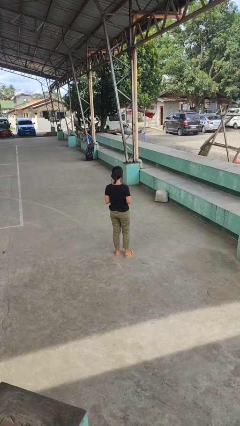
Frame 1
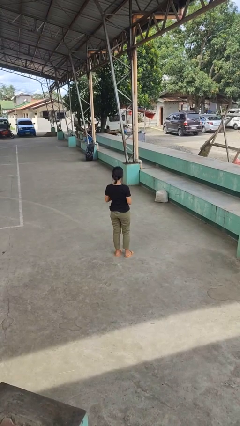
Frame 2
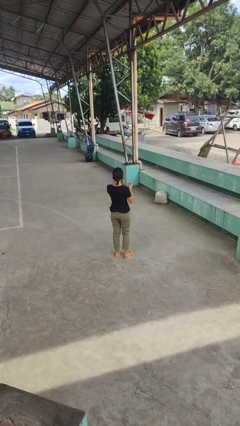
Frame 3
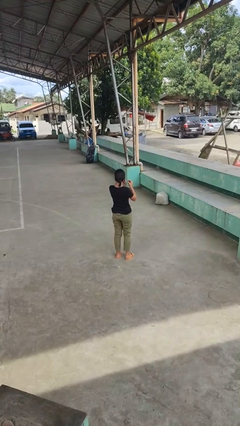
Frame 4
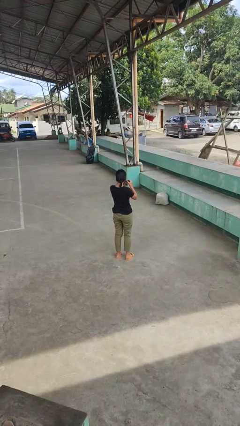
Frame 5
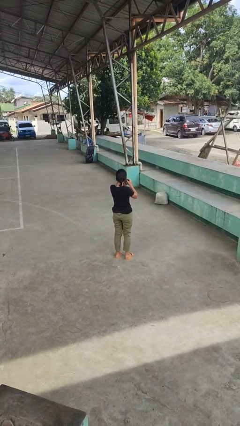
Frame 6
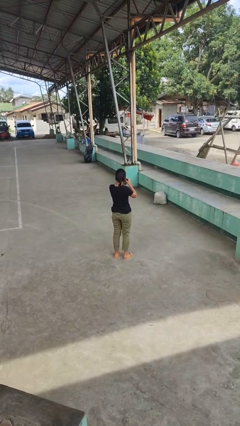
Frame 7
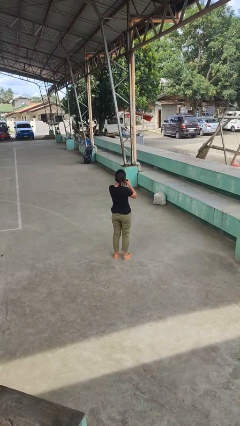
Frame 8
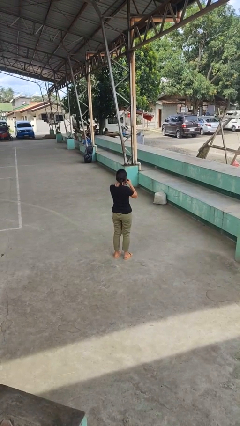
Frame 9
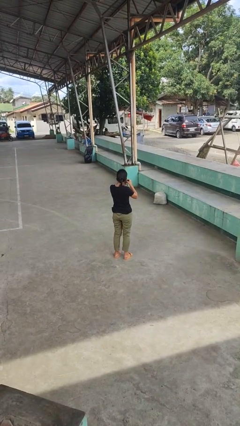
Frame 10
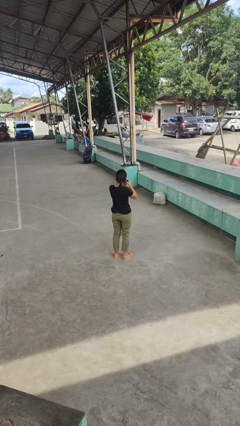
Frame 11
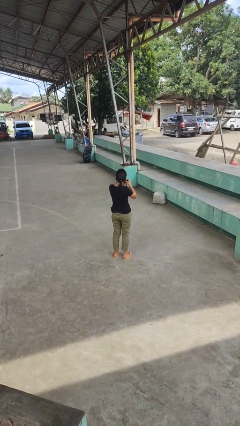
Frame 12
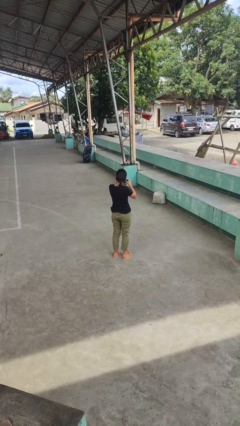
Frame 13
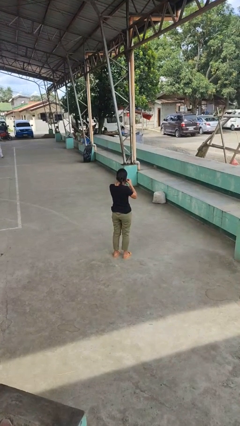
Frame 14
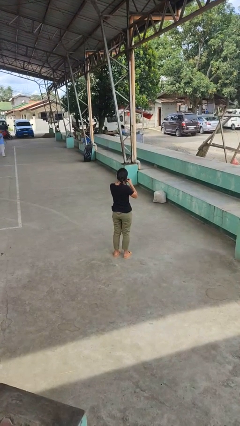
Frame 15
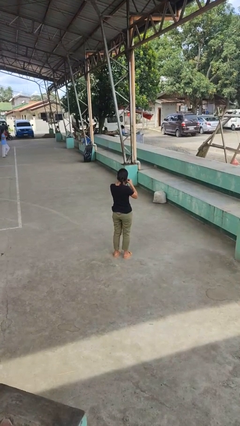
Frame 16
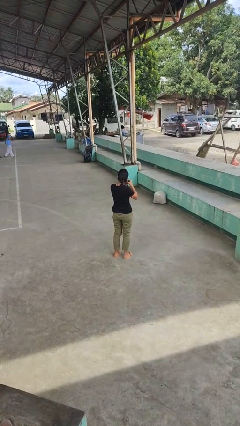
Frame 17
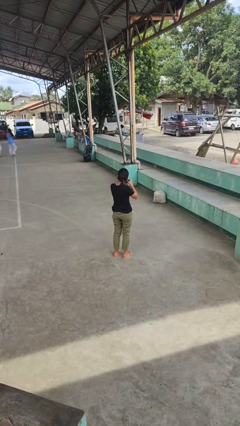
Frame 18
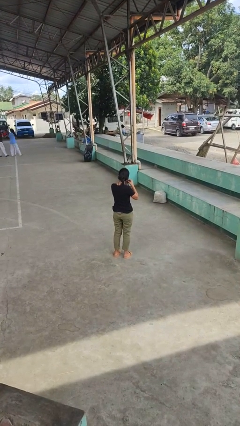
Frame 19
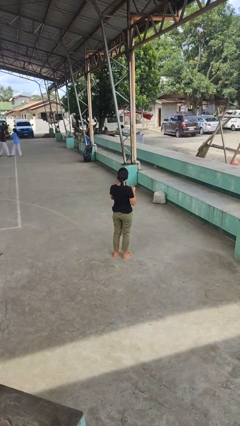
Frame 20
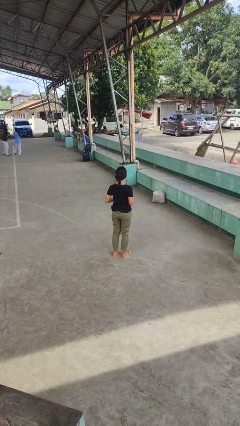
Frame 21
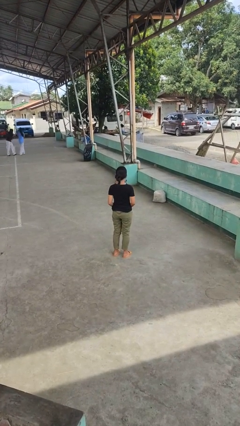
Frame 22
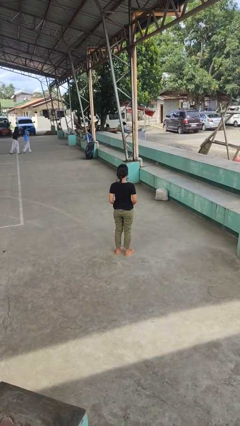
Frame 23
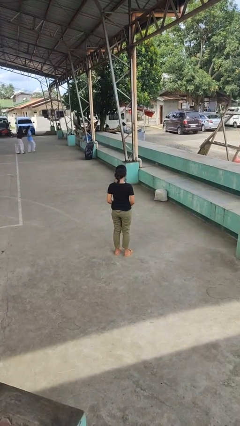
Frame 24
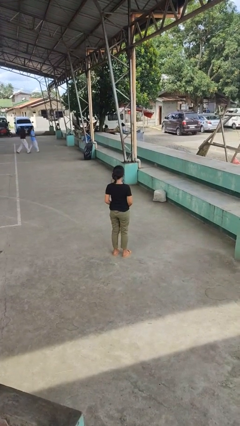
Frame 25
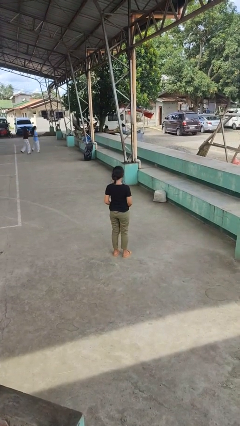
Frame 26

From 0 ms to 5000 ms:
person puts on earrings

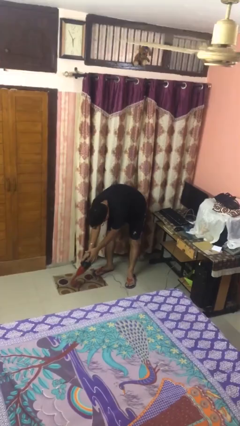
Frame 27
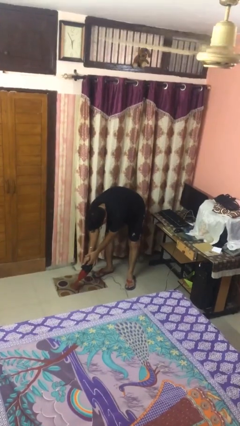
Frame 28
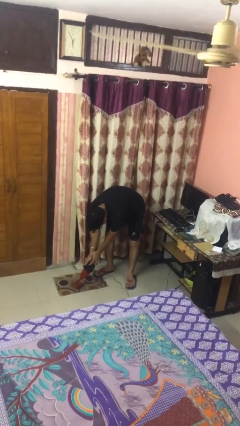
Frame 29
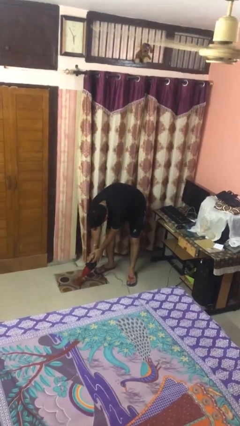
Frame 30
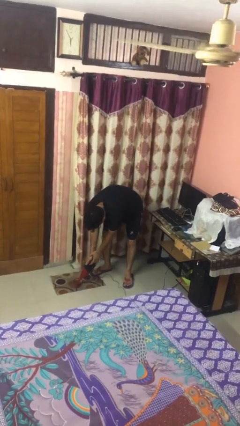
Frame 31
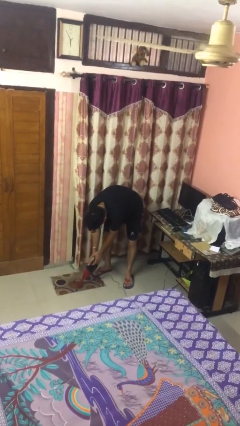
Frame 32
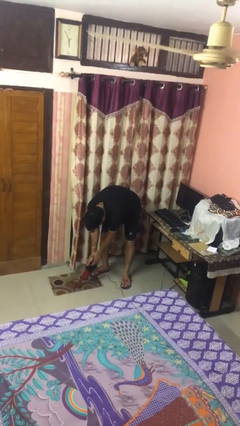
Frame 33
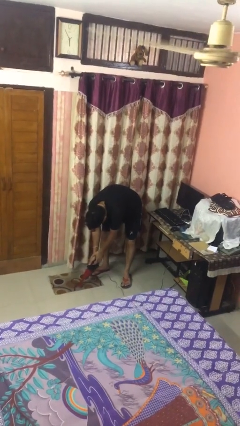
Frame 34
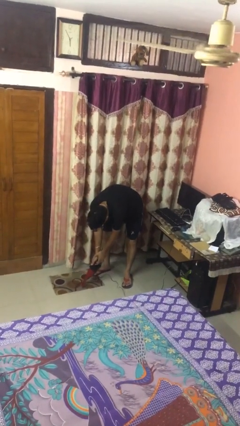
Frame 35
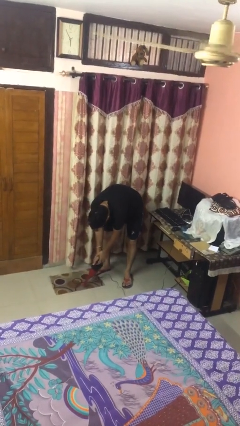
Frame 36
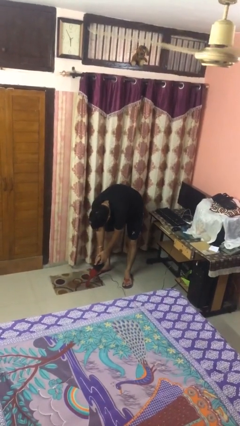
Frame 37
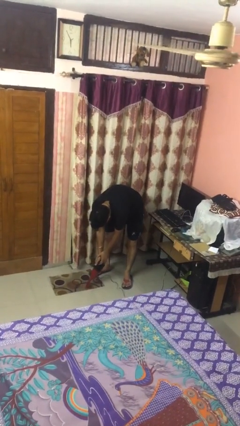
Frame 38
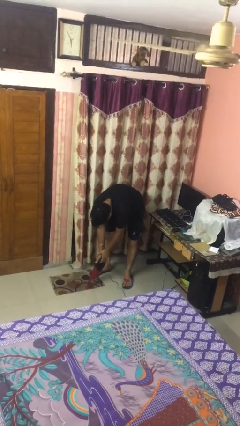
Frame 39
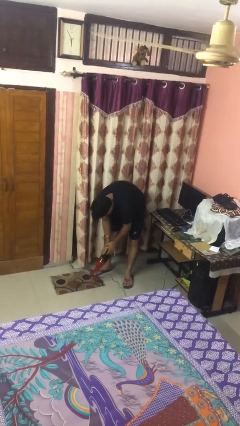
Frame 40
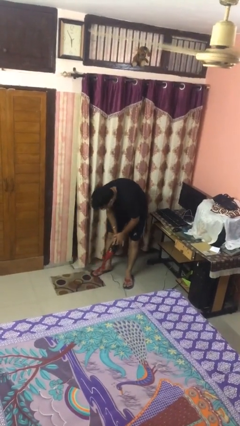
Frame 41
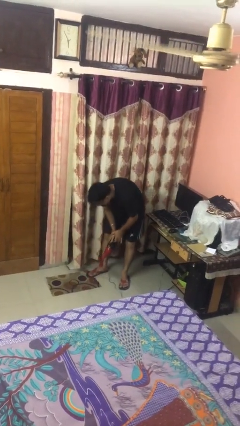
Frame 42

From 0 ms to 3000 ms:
person vacuums carpet

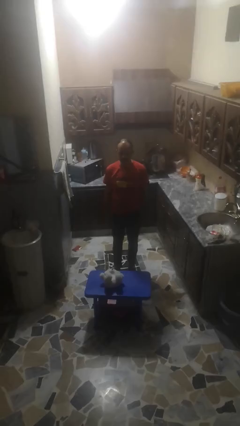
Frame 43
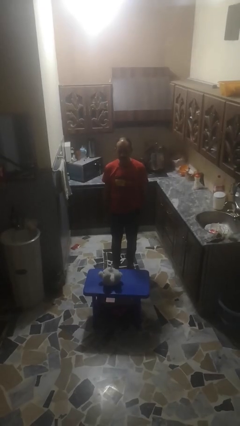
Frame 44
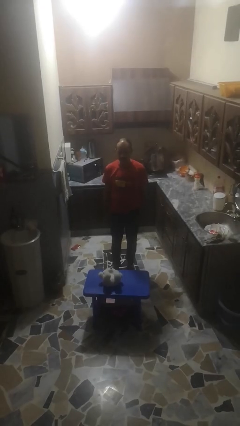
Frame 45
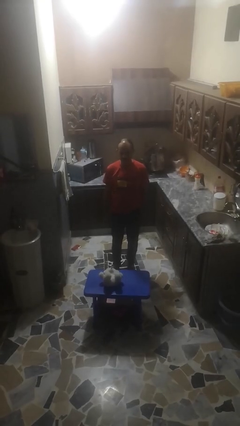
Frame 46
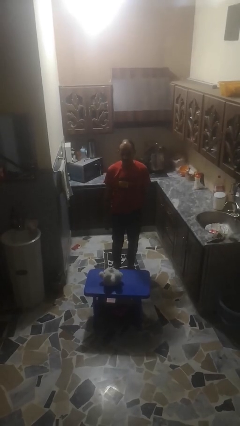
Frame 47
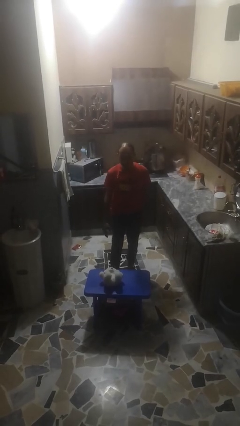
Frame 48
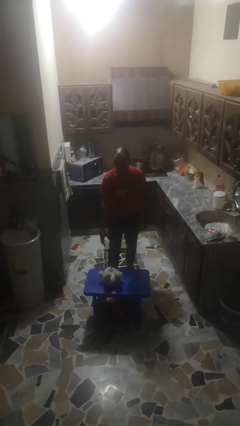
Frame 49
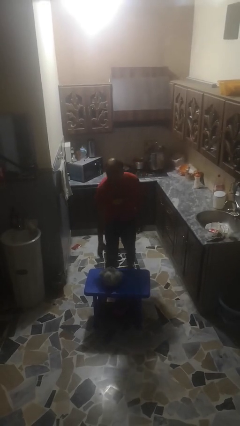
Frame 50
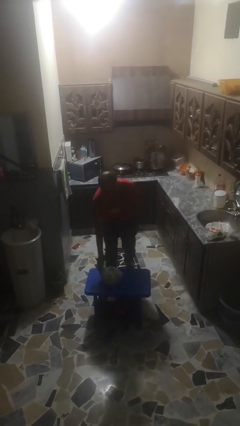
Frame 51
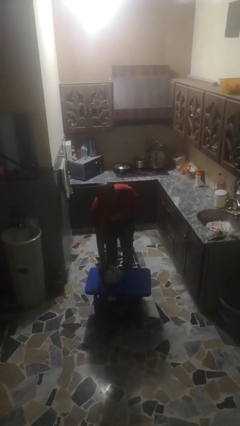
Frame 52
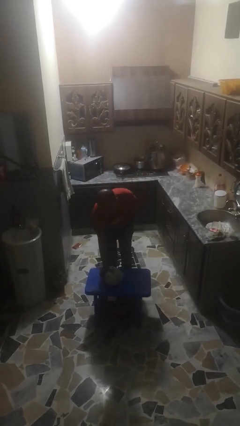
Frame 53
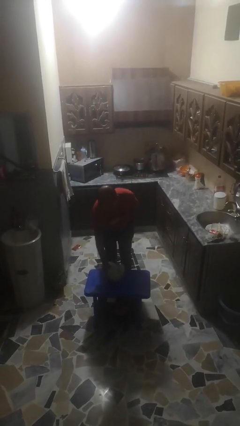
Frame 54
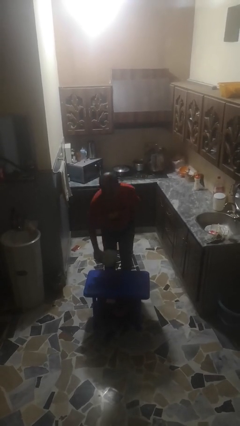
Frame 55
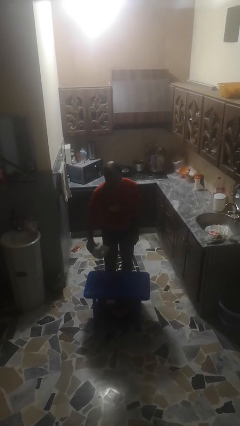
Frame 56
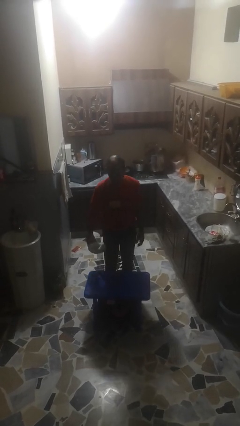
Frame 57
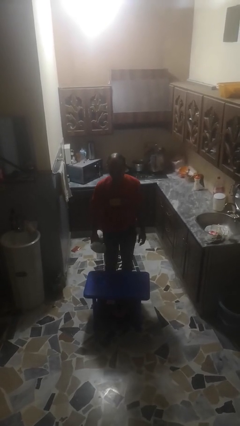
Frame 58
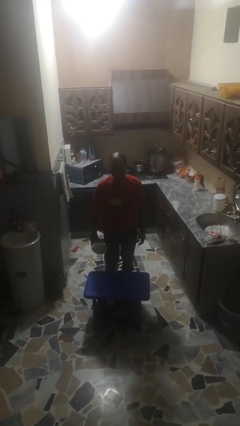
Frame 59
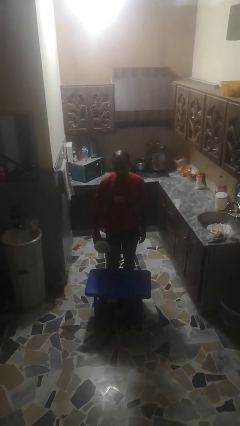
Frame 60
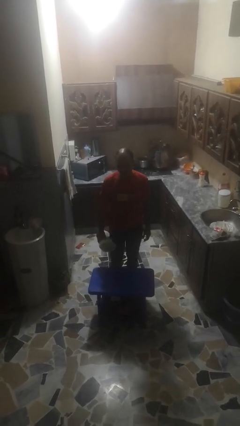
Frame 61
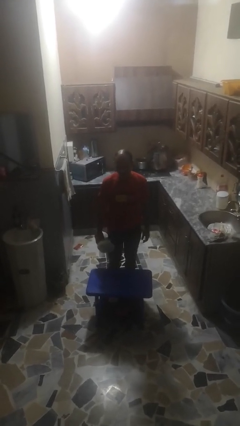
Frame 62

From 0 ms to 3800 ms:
person picks up object from floor

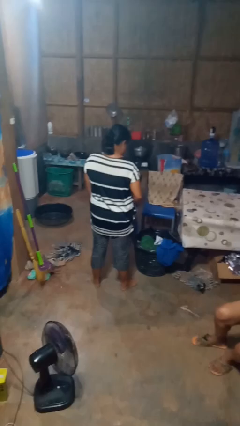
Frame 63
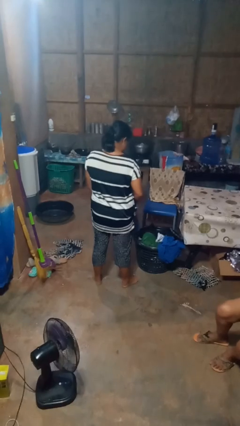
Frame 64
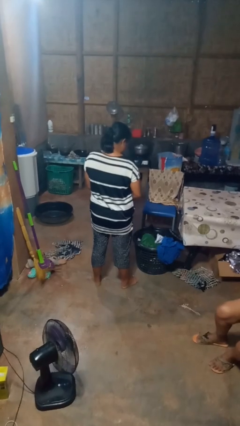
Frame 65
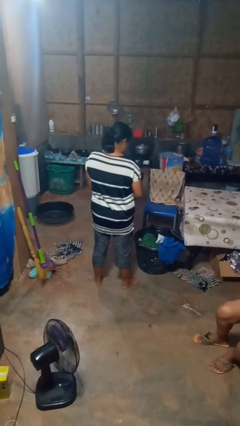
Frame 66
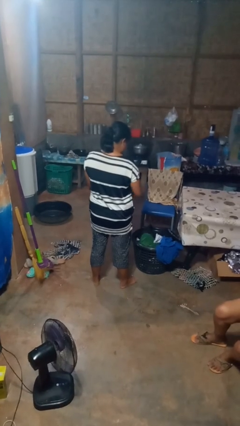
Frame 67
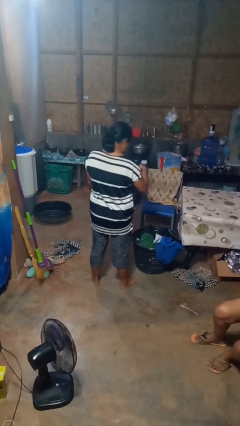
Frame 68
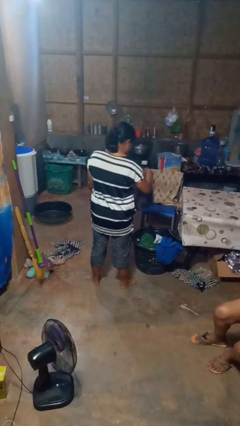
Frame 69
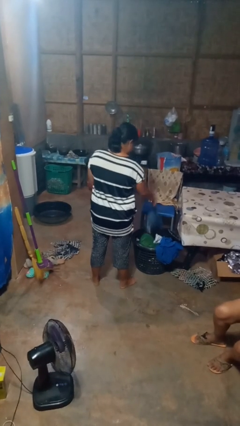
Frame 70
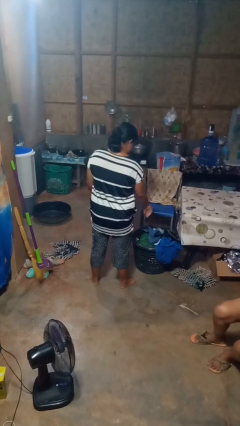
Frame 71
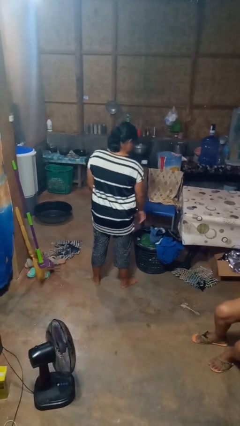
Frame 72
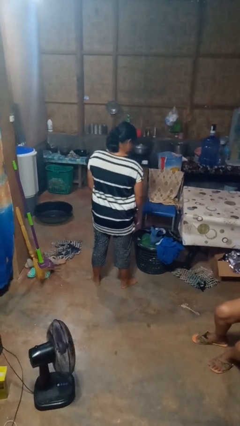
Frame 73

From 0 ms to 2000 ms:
person puts object into basket

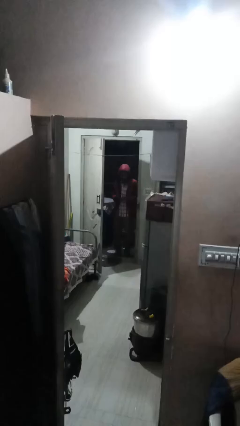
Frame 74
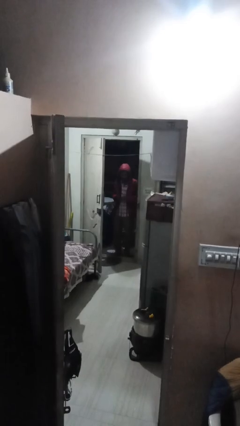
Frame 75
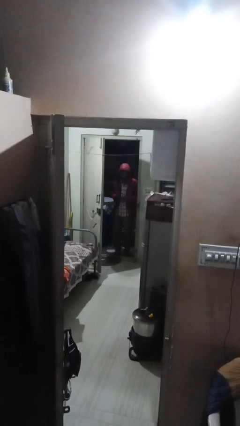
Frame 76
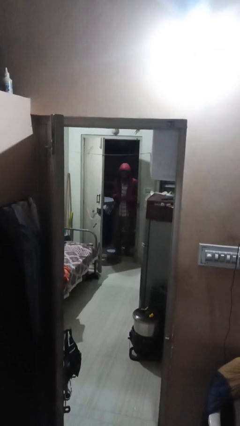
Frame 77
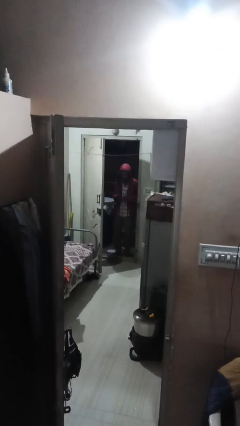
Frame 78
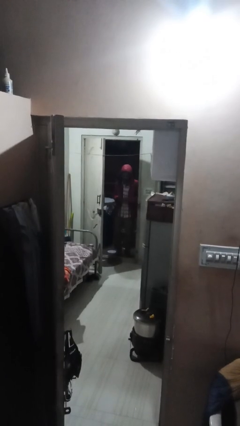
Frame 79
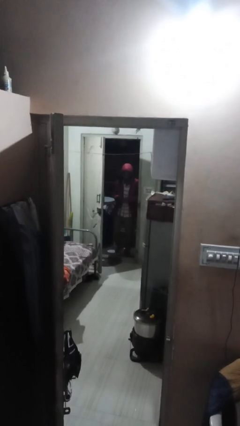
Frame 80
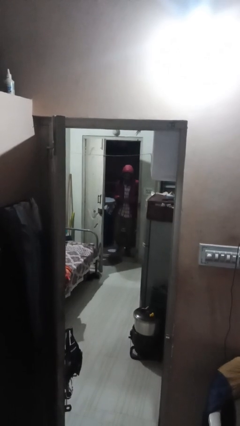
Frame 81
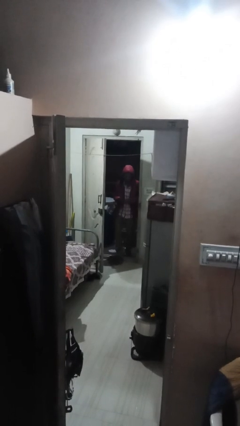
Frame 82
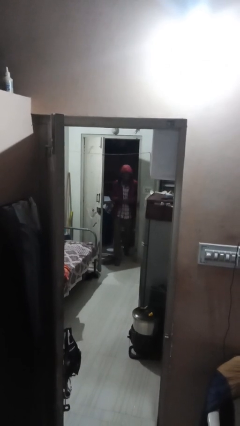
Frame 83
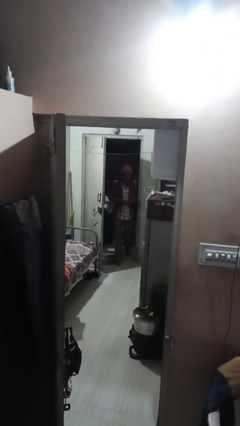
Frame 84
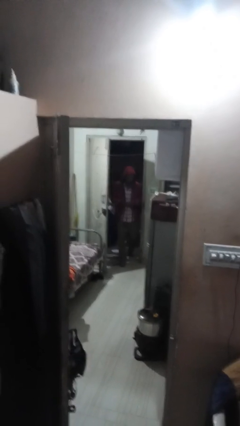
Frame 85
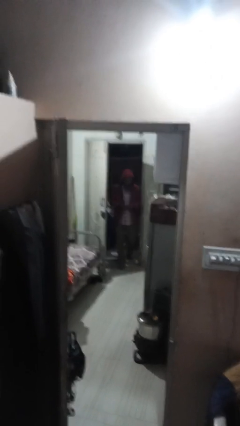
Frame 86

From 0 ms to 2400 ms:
person enters scene through structure

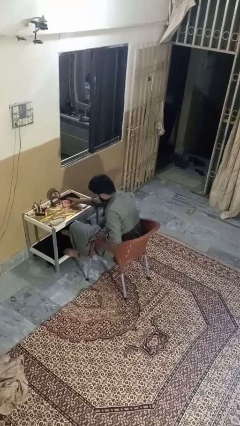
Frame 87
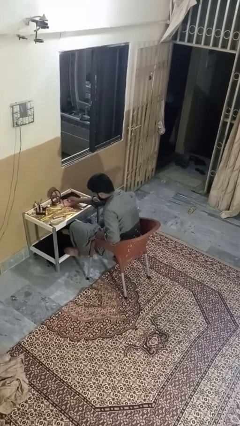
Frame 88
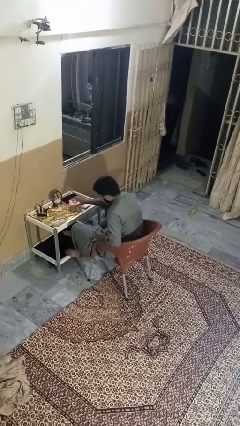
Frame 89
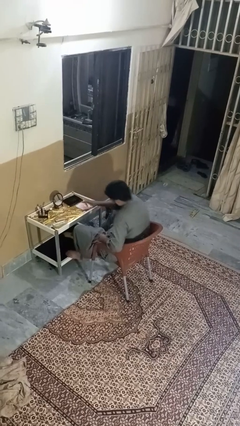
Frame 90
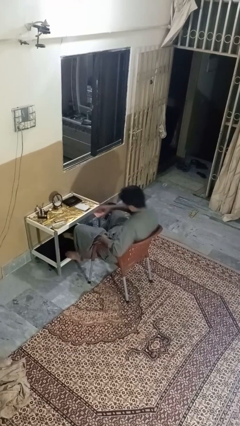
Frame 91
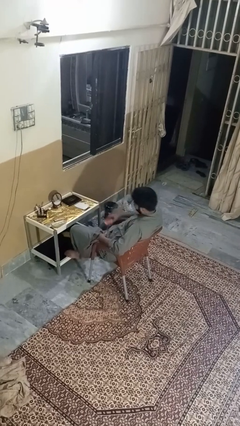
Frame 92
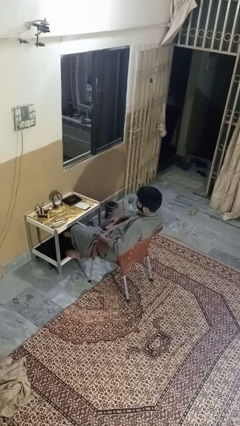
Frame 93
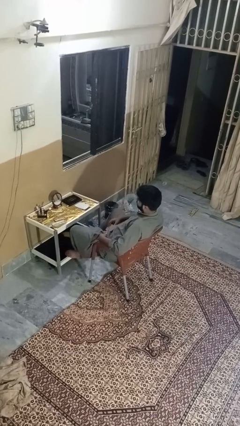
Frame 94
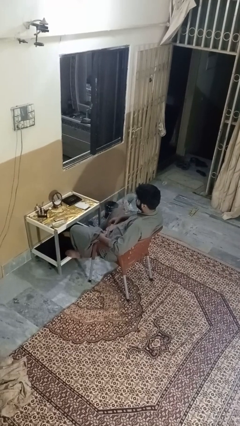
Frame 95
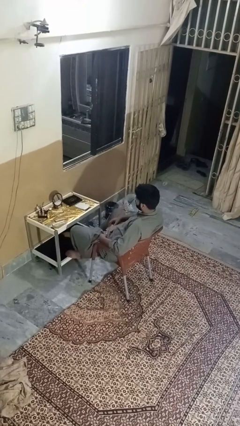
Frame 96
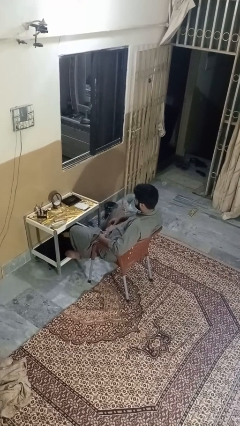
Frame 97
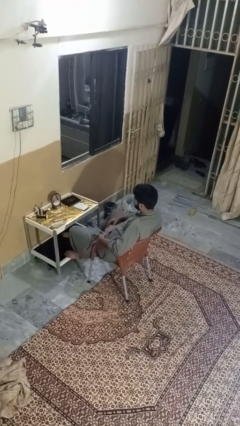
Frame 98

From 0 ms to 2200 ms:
person picks up object from table
